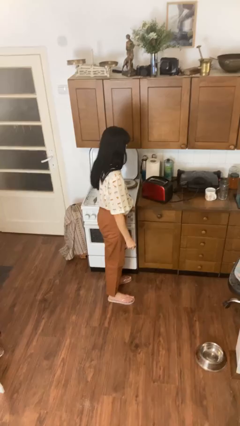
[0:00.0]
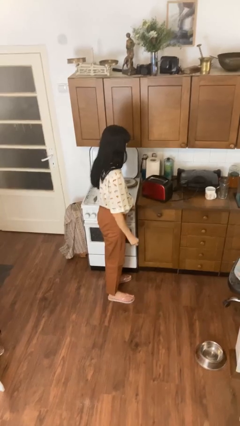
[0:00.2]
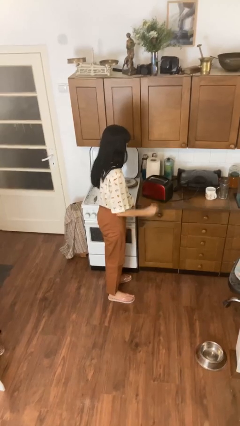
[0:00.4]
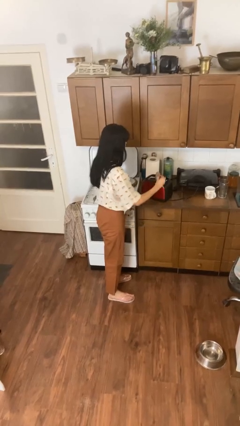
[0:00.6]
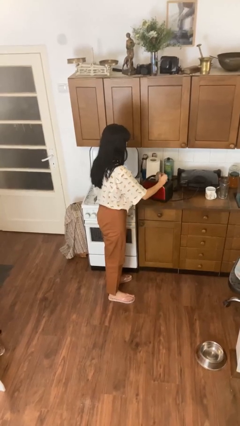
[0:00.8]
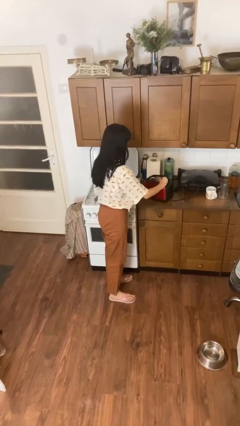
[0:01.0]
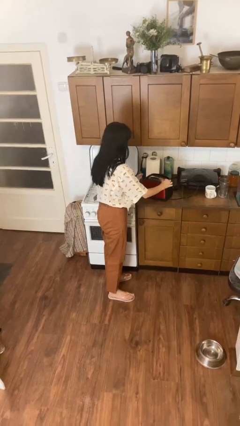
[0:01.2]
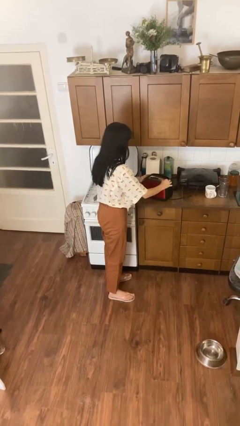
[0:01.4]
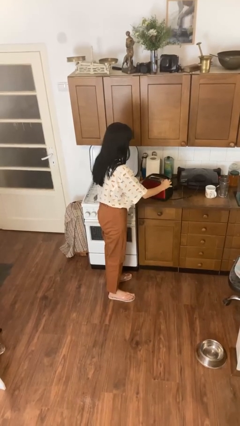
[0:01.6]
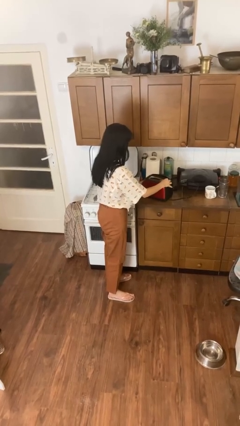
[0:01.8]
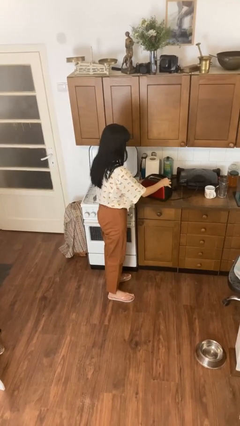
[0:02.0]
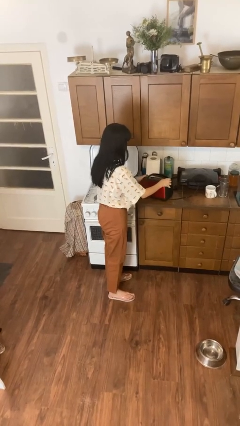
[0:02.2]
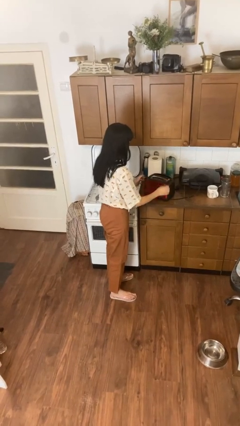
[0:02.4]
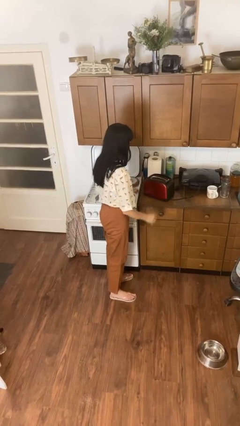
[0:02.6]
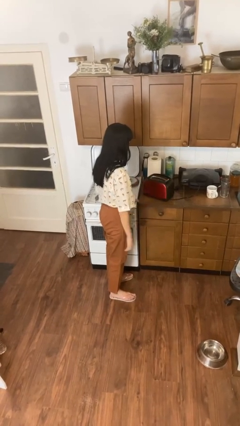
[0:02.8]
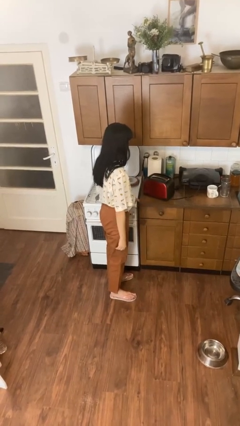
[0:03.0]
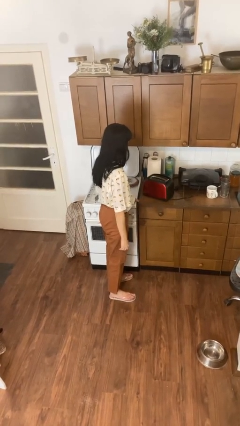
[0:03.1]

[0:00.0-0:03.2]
person puts object into toaster

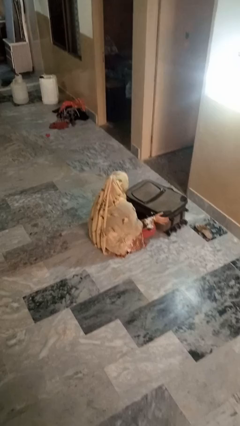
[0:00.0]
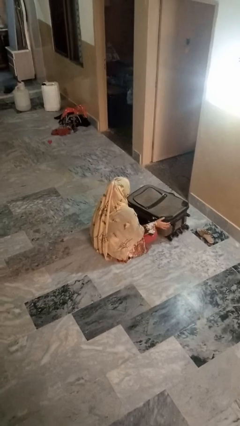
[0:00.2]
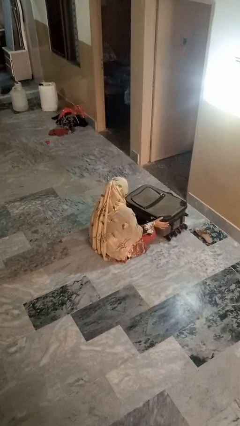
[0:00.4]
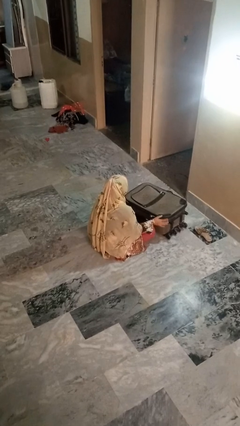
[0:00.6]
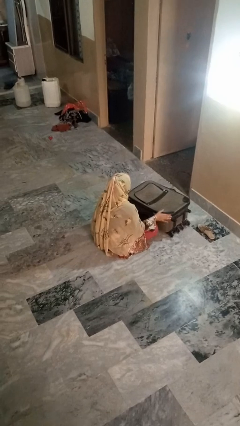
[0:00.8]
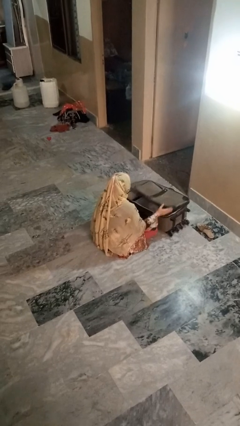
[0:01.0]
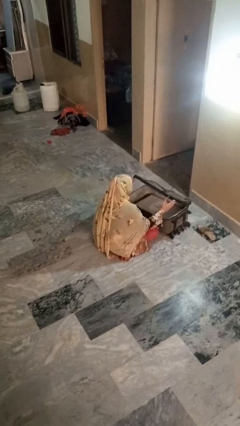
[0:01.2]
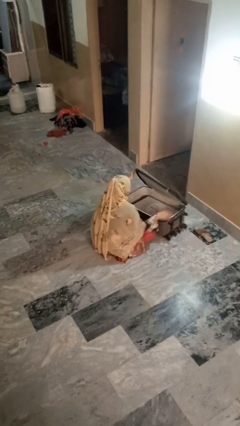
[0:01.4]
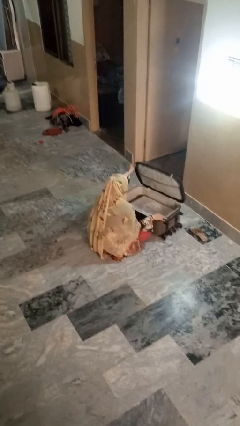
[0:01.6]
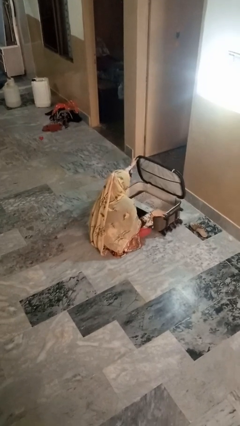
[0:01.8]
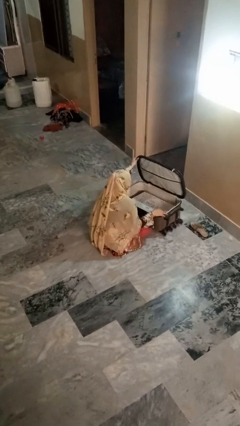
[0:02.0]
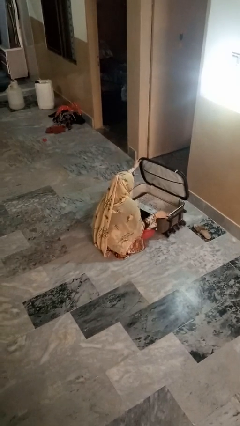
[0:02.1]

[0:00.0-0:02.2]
person opens suitcase

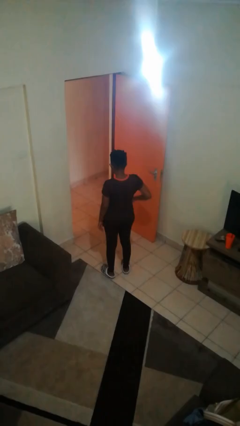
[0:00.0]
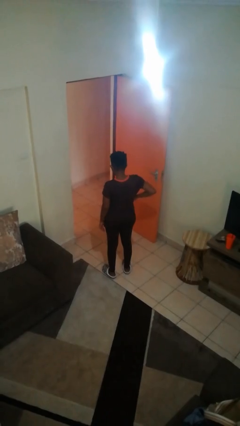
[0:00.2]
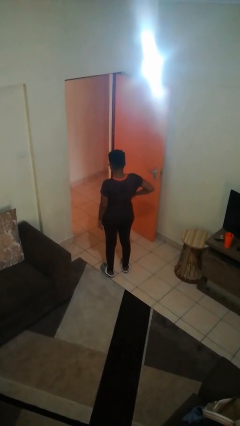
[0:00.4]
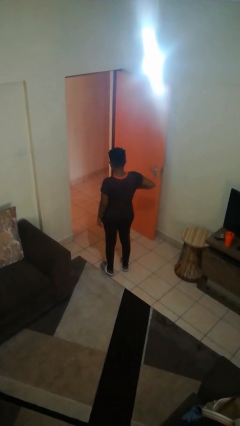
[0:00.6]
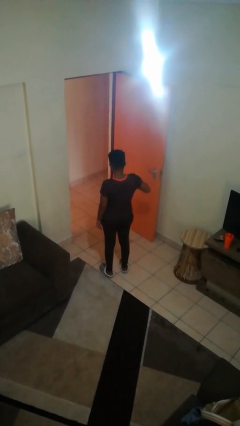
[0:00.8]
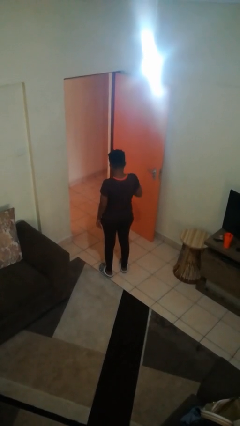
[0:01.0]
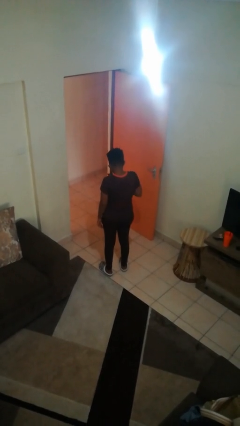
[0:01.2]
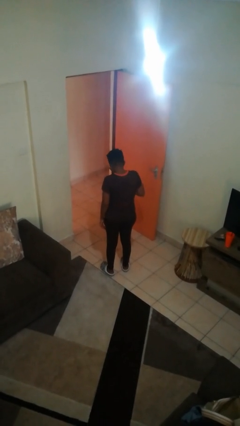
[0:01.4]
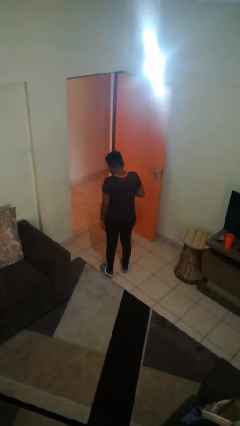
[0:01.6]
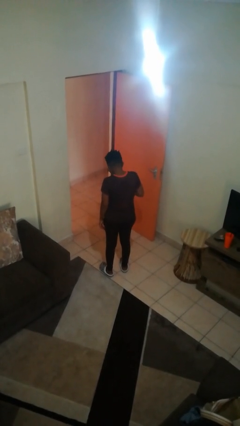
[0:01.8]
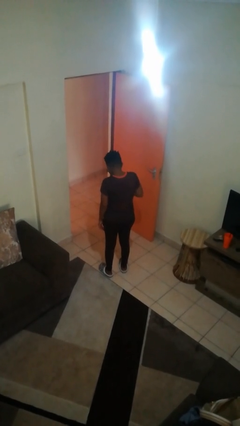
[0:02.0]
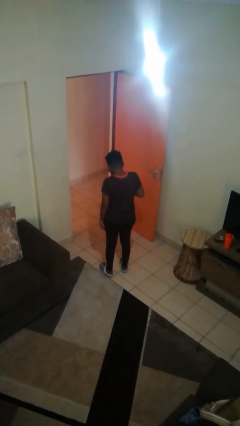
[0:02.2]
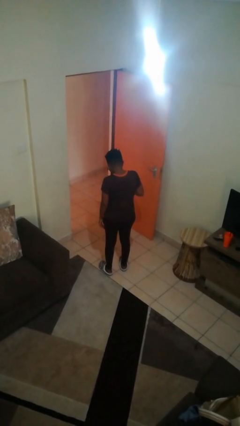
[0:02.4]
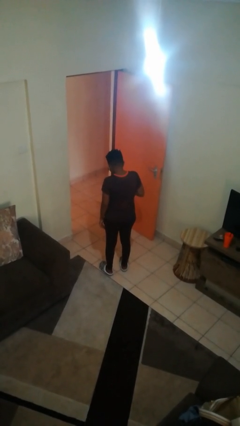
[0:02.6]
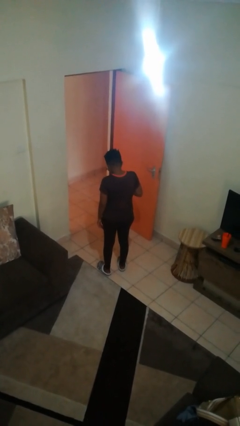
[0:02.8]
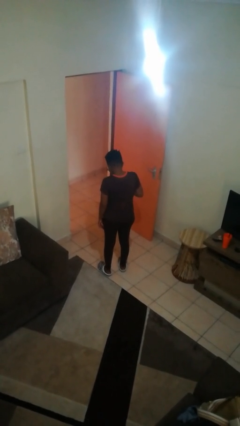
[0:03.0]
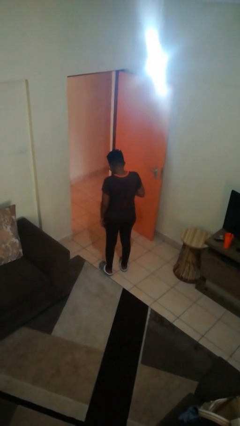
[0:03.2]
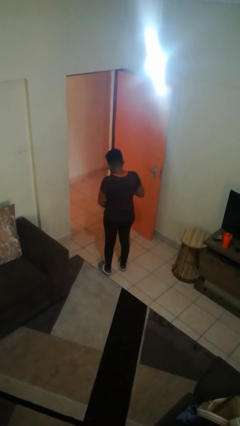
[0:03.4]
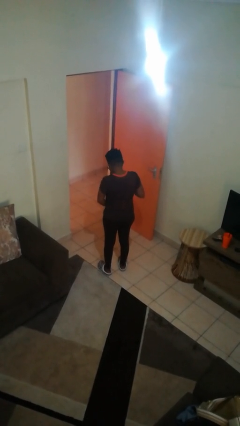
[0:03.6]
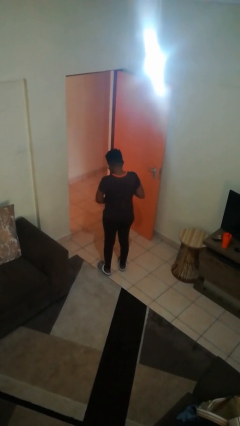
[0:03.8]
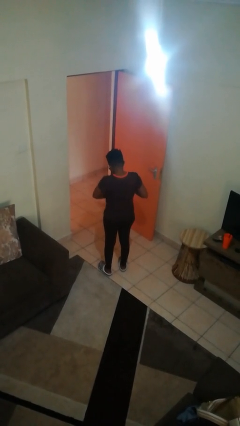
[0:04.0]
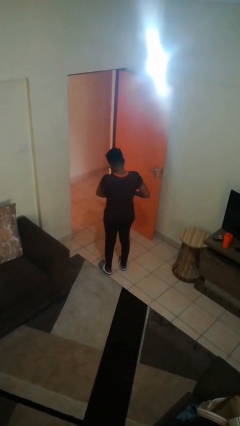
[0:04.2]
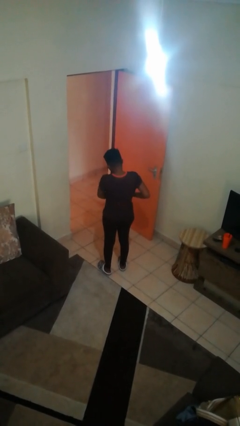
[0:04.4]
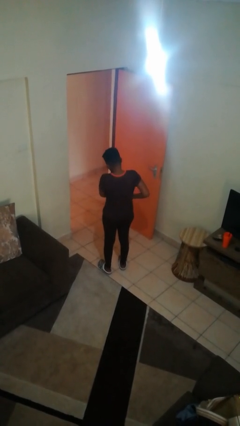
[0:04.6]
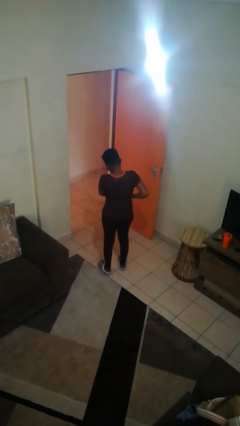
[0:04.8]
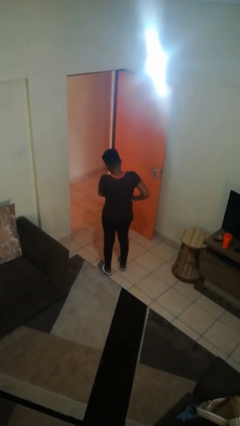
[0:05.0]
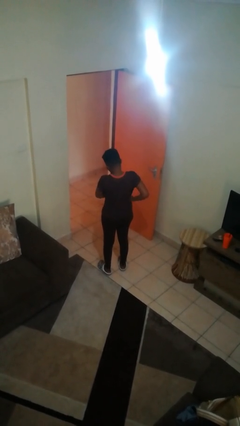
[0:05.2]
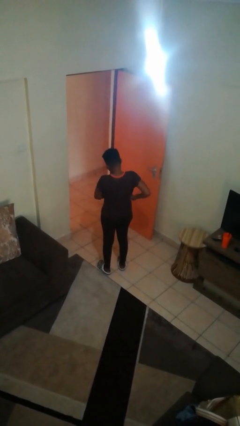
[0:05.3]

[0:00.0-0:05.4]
person takes phone from pocket

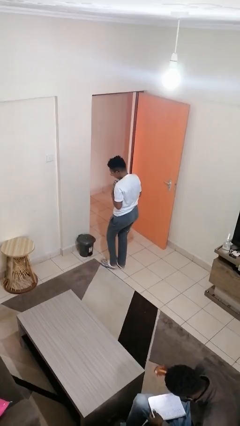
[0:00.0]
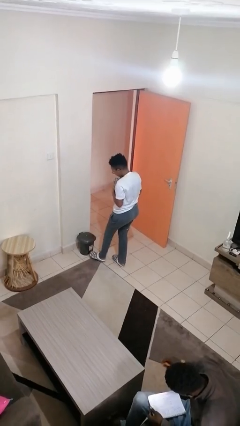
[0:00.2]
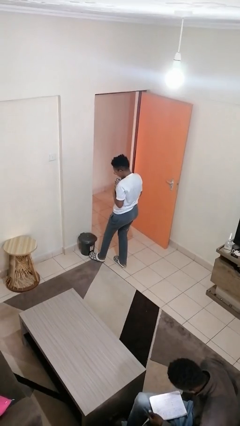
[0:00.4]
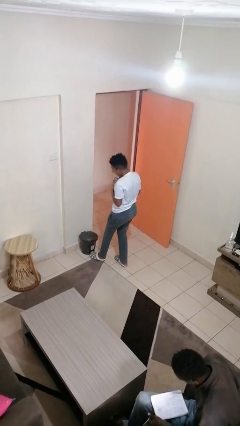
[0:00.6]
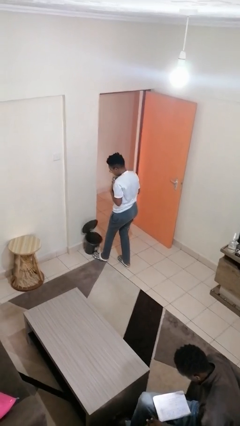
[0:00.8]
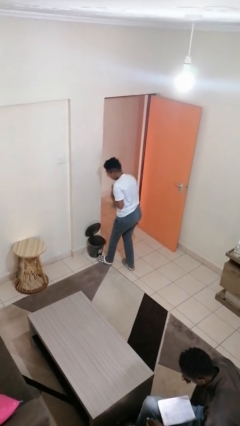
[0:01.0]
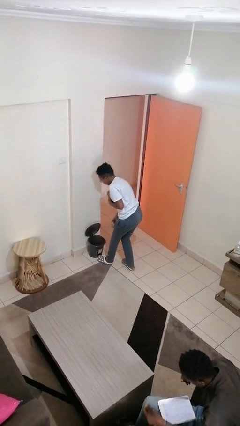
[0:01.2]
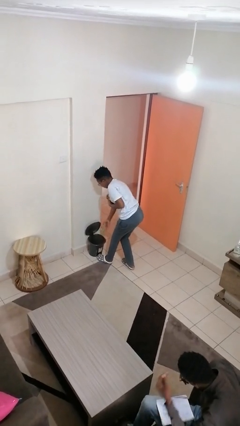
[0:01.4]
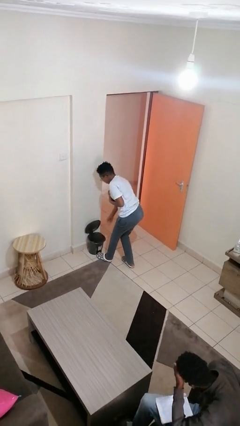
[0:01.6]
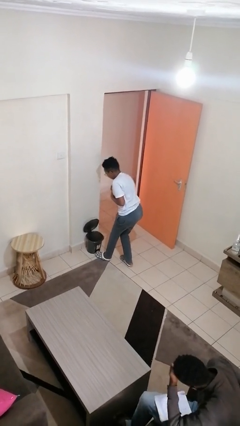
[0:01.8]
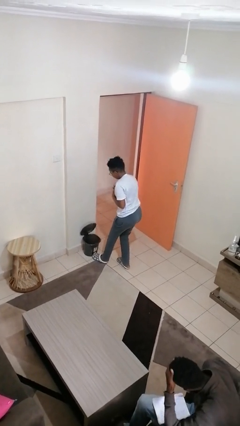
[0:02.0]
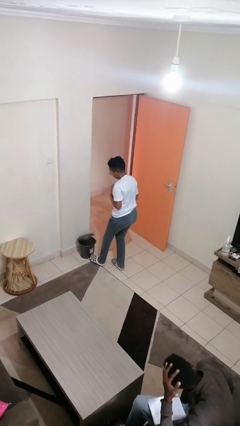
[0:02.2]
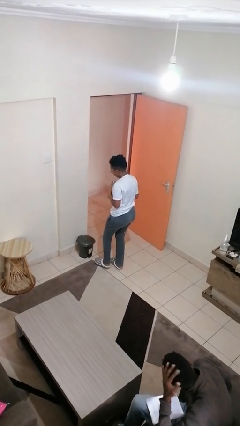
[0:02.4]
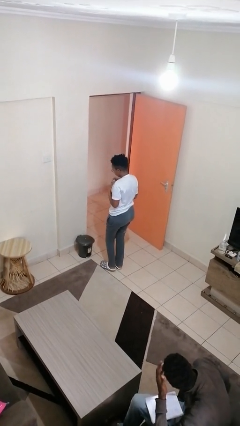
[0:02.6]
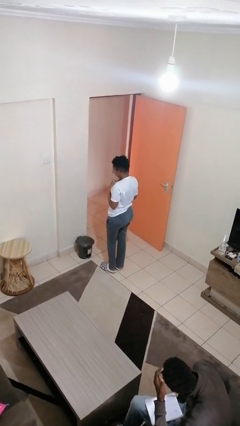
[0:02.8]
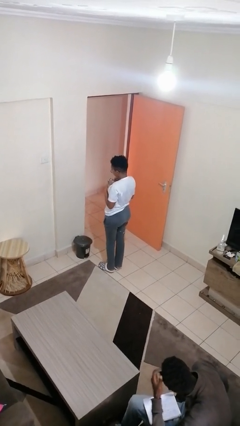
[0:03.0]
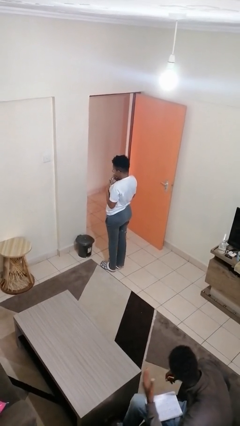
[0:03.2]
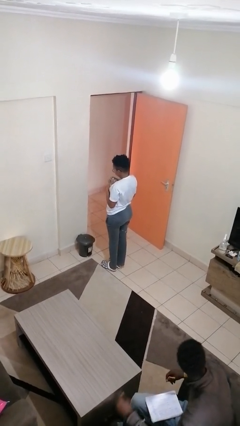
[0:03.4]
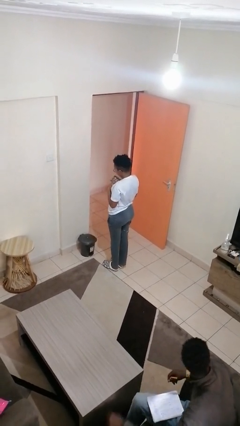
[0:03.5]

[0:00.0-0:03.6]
person discards trash

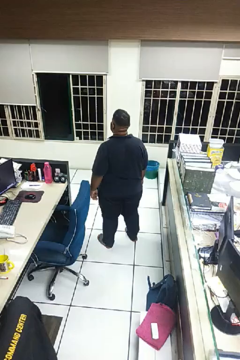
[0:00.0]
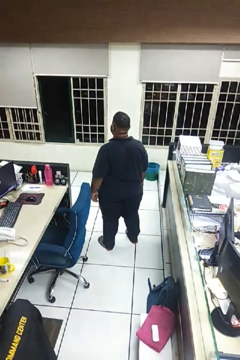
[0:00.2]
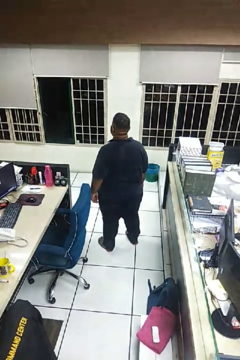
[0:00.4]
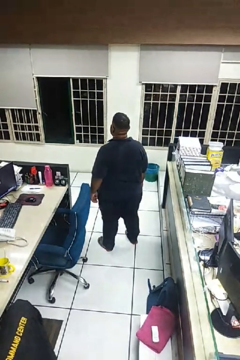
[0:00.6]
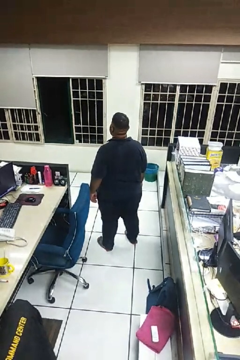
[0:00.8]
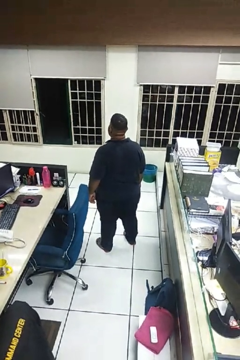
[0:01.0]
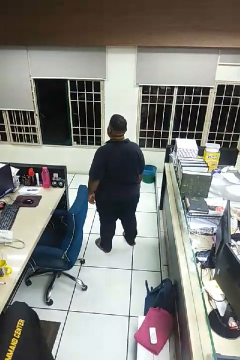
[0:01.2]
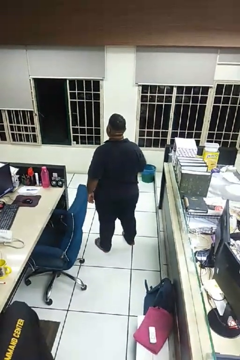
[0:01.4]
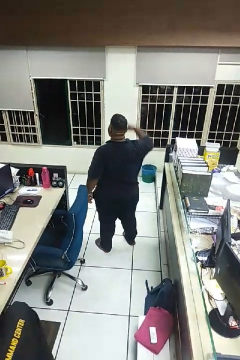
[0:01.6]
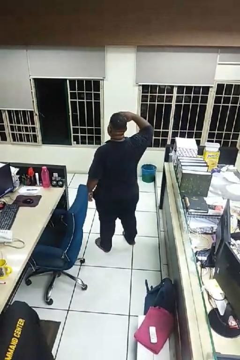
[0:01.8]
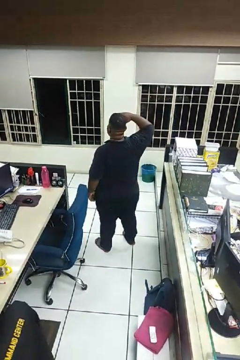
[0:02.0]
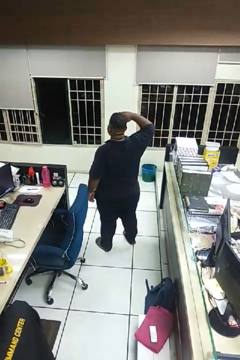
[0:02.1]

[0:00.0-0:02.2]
person salutes

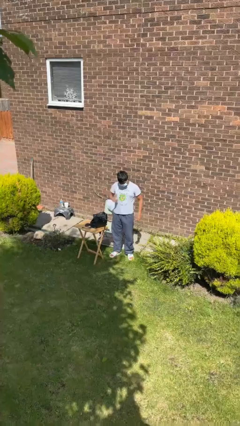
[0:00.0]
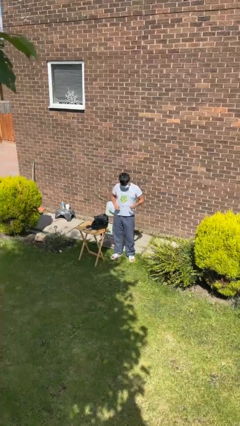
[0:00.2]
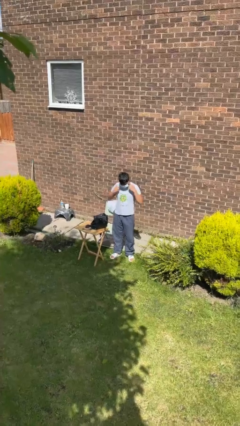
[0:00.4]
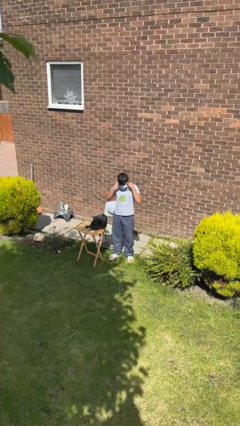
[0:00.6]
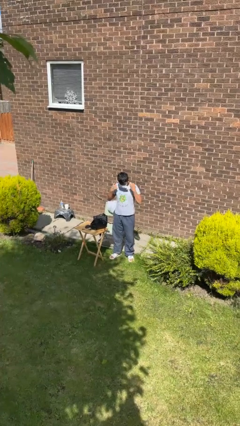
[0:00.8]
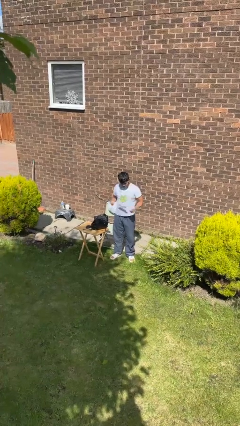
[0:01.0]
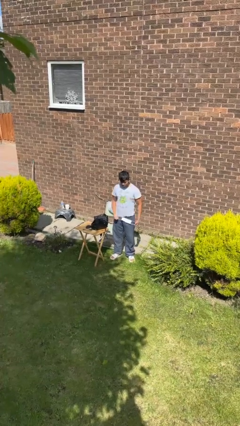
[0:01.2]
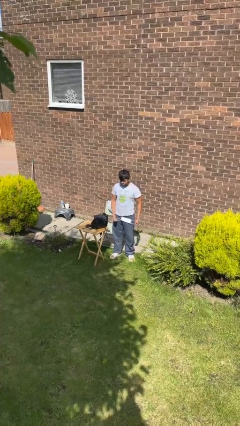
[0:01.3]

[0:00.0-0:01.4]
person takes off facemask
